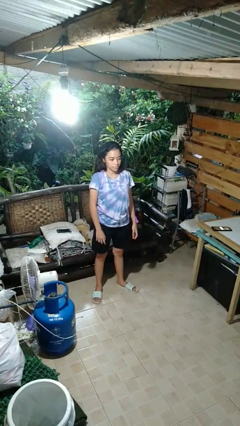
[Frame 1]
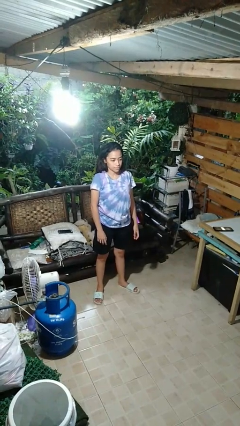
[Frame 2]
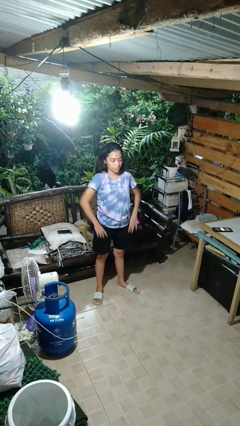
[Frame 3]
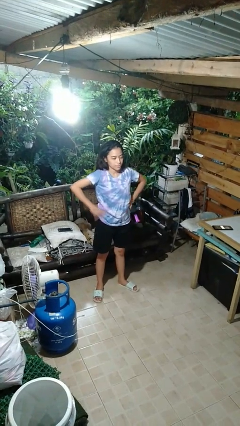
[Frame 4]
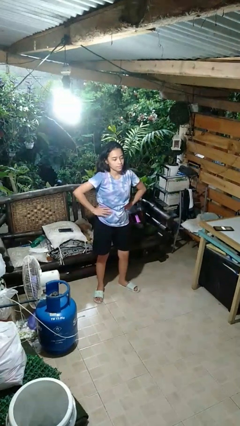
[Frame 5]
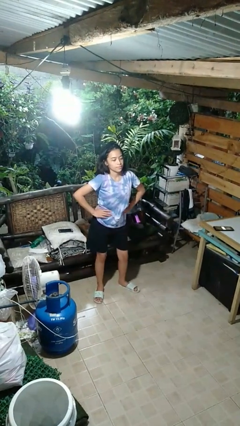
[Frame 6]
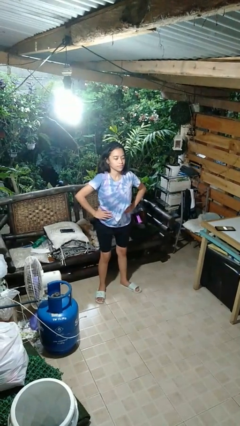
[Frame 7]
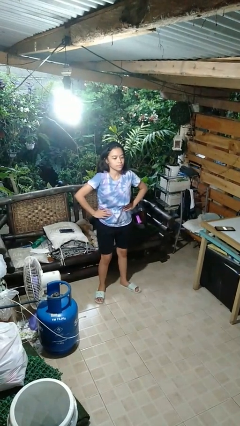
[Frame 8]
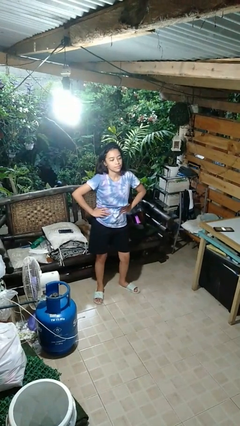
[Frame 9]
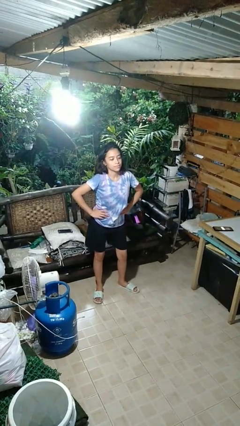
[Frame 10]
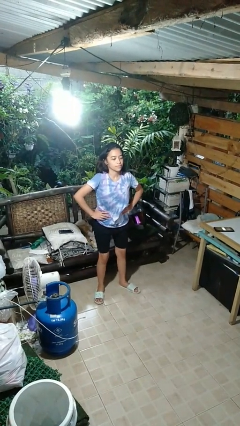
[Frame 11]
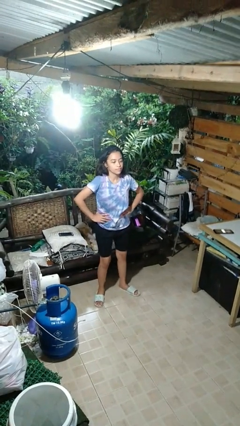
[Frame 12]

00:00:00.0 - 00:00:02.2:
person wiggles hips

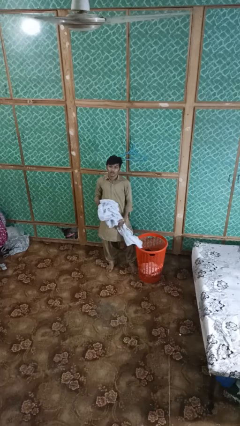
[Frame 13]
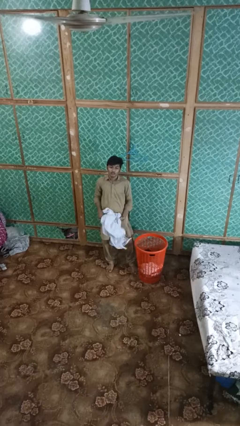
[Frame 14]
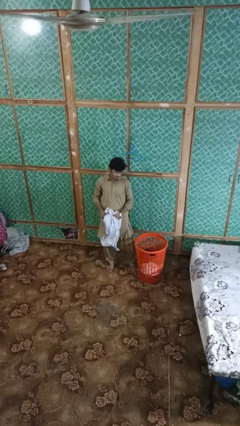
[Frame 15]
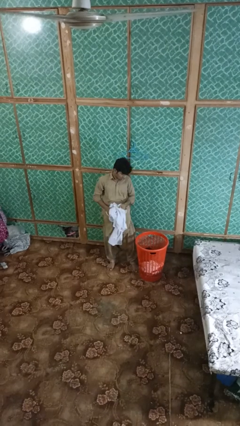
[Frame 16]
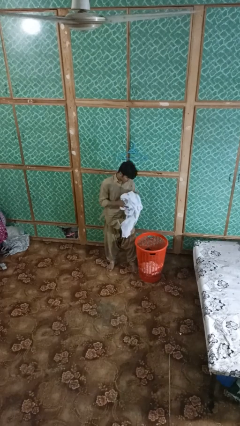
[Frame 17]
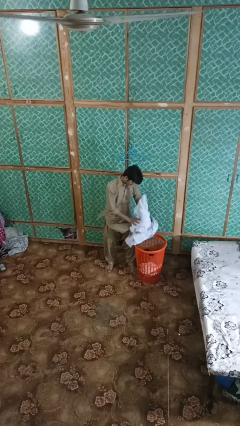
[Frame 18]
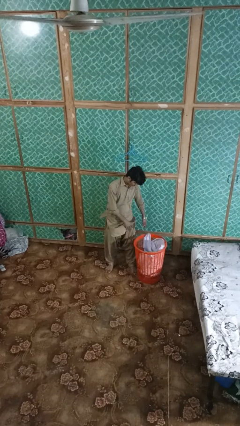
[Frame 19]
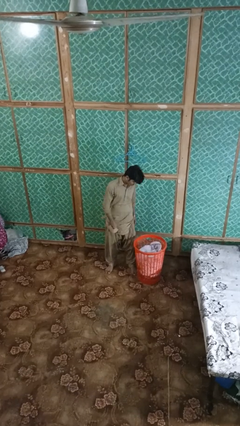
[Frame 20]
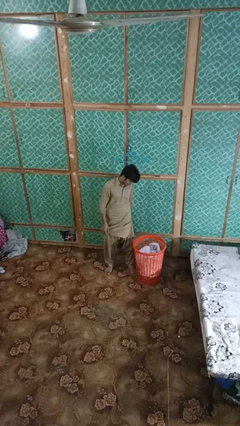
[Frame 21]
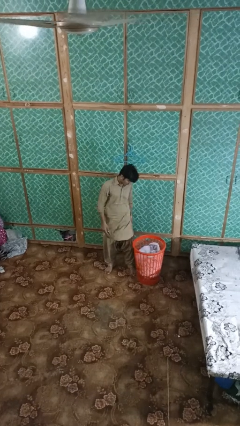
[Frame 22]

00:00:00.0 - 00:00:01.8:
person puts object into basket

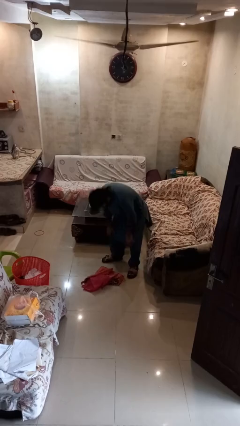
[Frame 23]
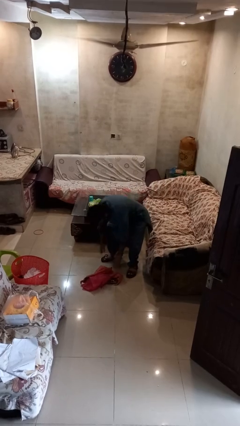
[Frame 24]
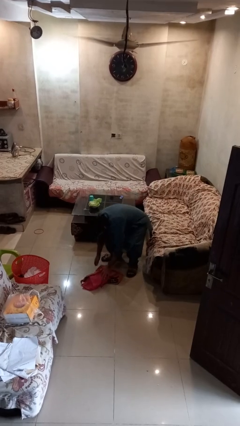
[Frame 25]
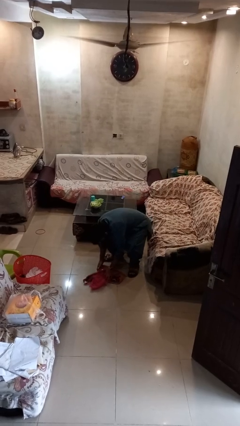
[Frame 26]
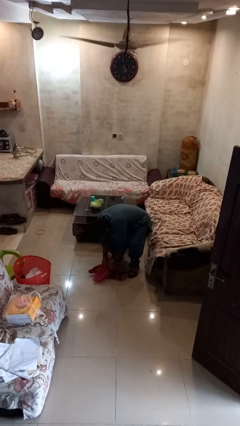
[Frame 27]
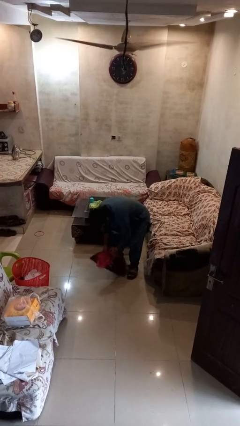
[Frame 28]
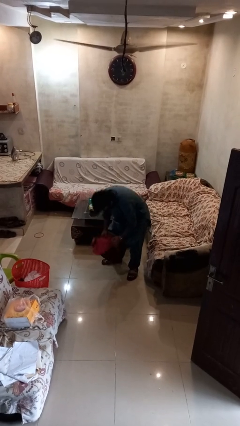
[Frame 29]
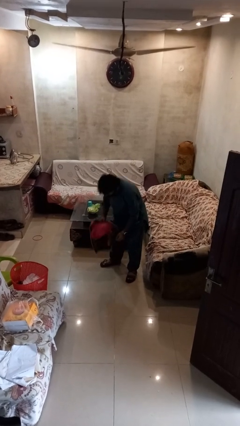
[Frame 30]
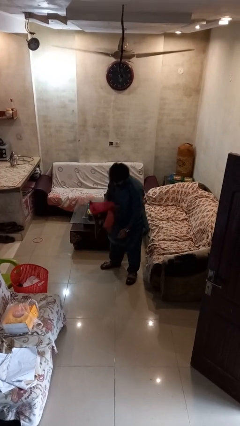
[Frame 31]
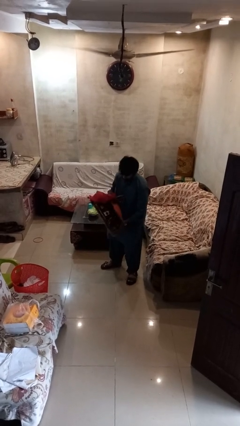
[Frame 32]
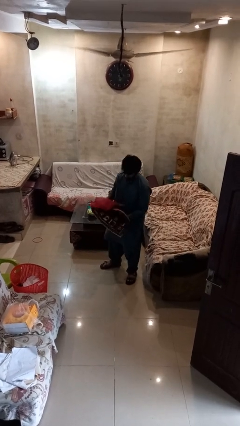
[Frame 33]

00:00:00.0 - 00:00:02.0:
person picks up object from floor

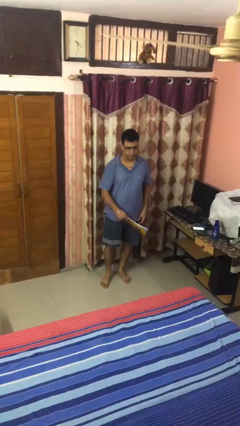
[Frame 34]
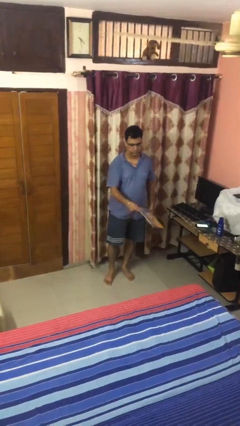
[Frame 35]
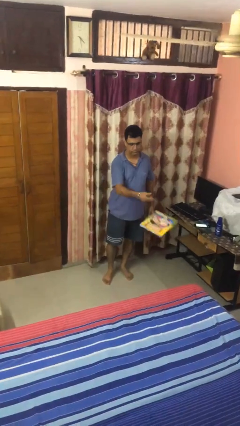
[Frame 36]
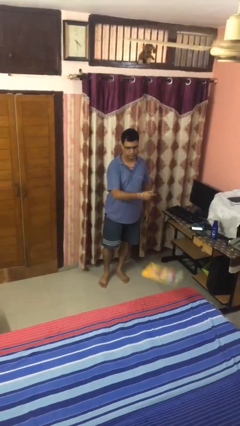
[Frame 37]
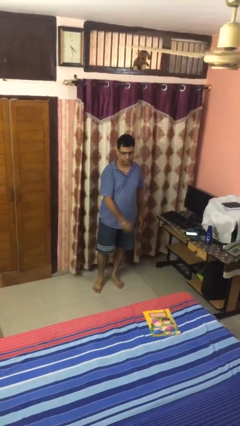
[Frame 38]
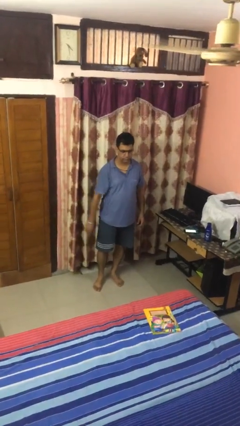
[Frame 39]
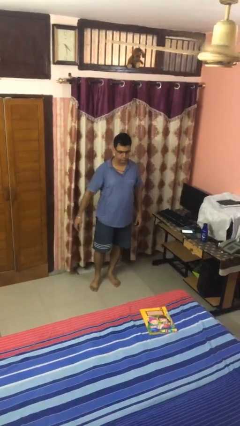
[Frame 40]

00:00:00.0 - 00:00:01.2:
person throws object on bed

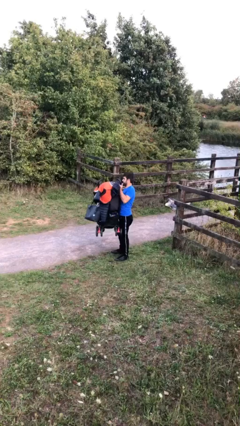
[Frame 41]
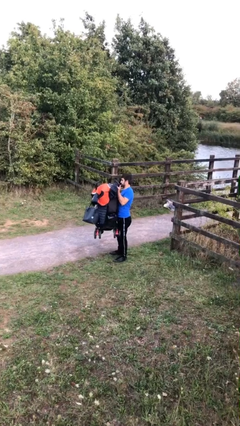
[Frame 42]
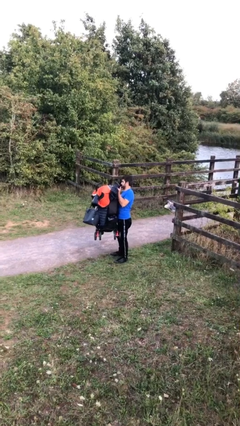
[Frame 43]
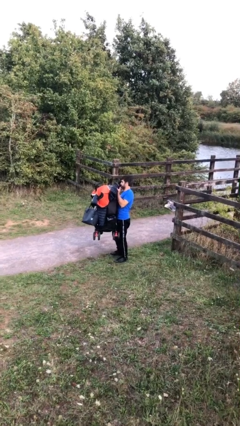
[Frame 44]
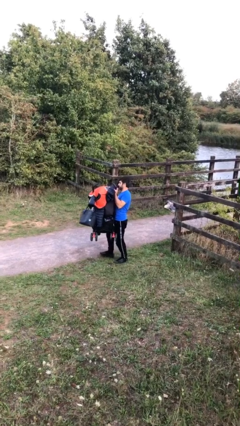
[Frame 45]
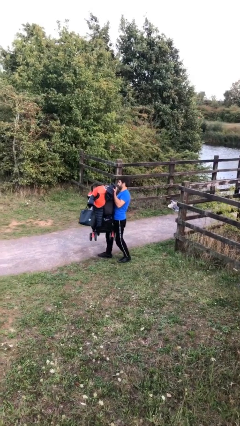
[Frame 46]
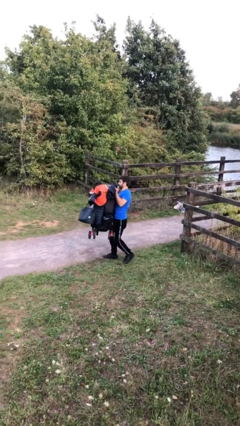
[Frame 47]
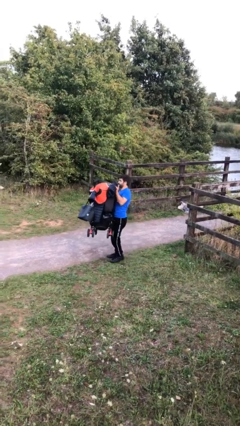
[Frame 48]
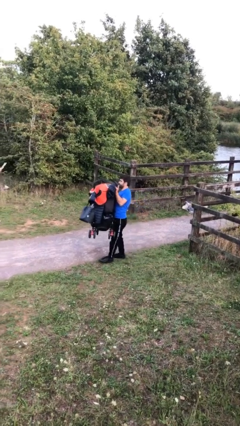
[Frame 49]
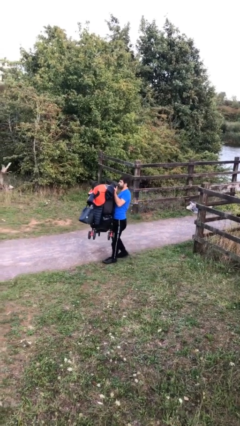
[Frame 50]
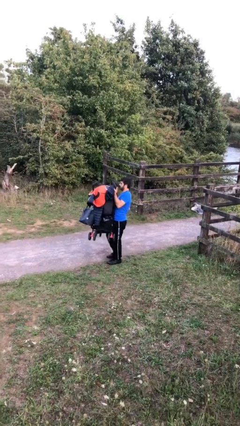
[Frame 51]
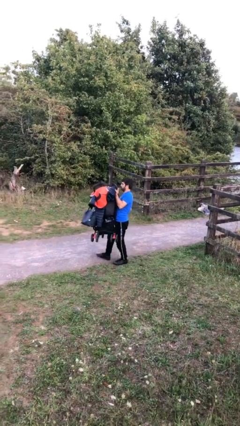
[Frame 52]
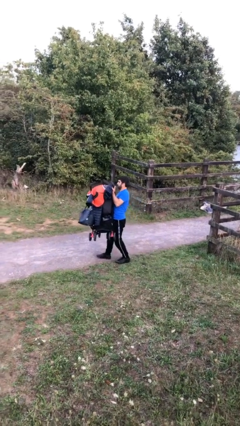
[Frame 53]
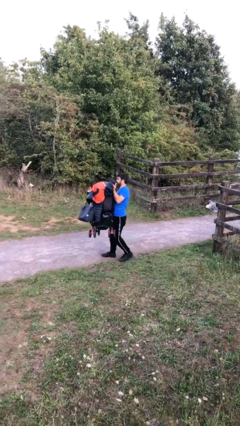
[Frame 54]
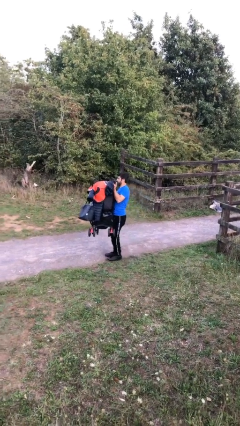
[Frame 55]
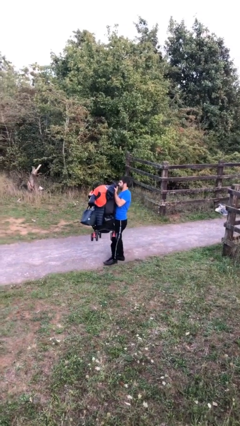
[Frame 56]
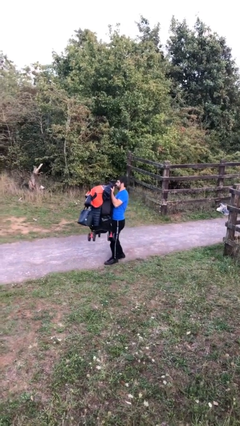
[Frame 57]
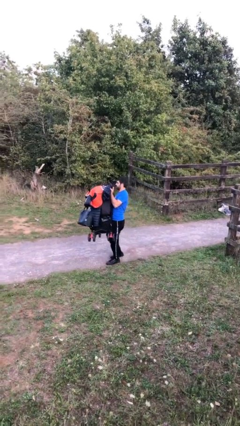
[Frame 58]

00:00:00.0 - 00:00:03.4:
person carries heavy object

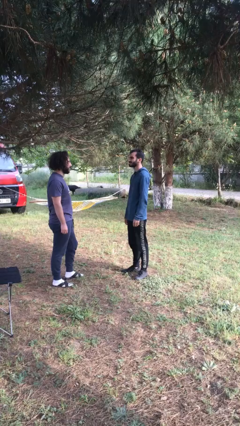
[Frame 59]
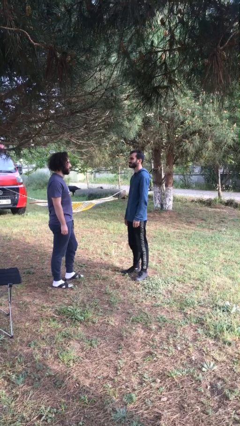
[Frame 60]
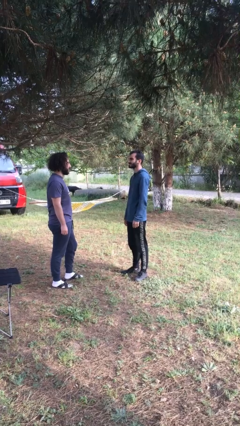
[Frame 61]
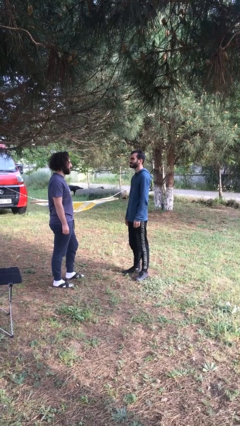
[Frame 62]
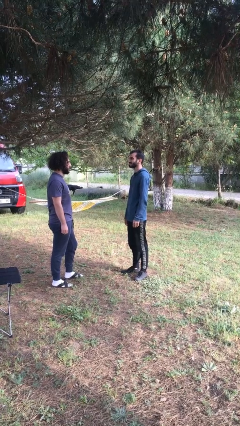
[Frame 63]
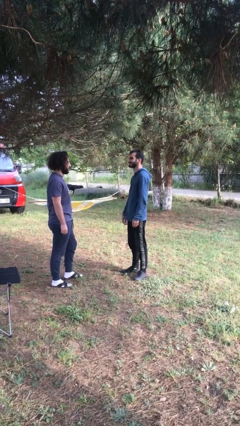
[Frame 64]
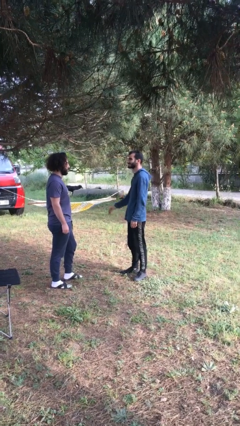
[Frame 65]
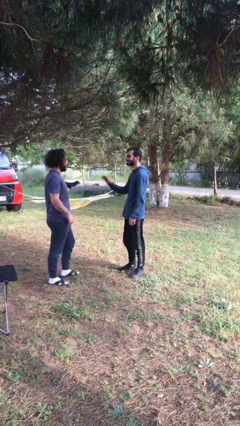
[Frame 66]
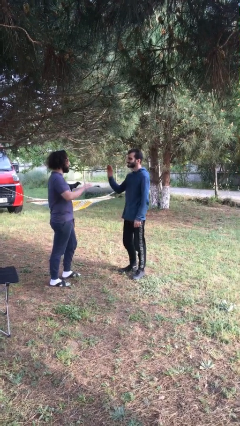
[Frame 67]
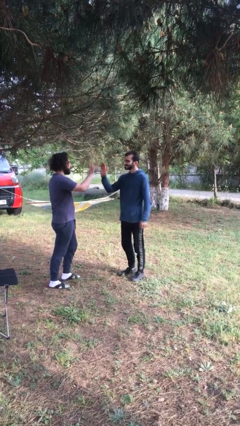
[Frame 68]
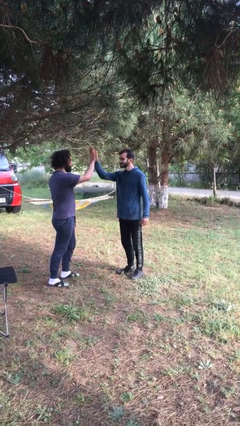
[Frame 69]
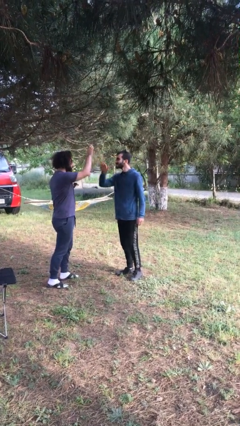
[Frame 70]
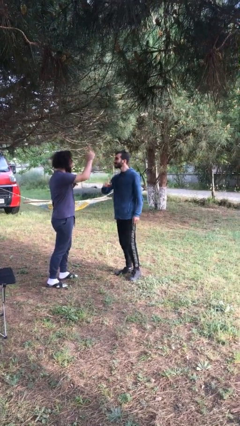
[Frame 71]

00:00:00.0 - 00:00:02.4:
person highfives hand

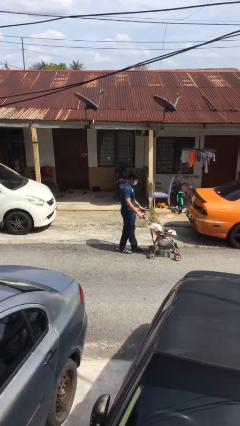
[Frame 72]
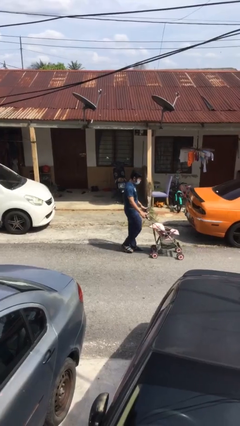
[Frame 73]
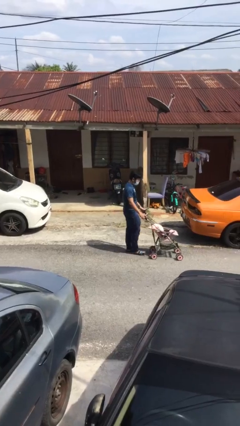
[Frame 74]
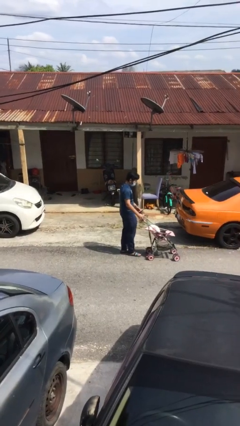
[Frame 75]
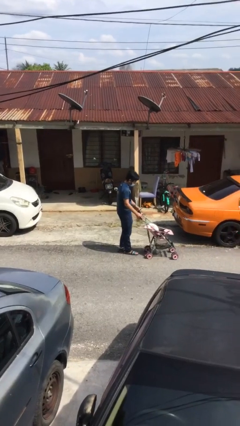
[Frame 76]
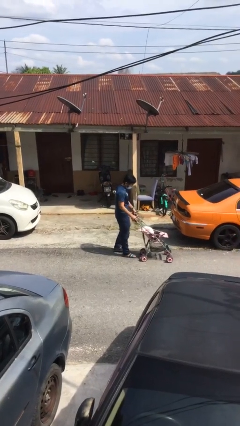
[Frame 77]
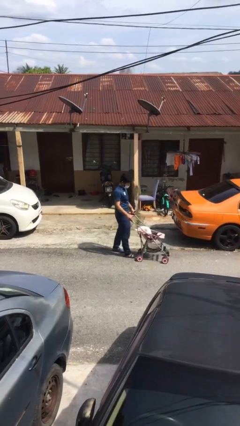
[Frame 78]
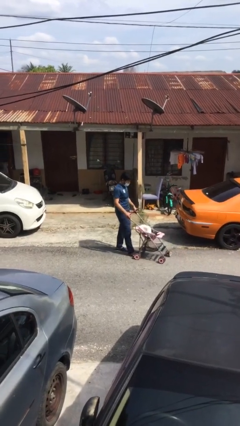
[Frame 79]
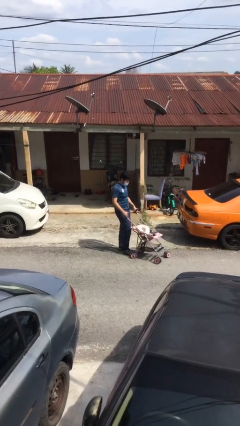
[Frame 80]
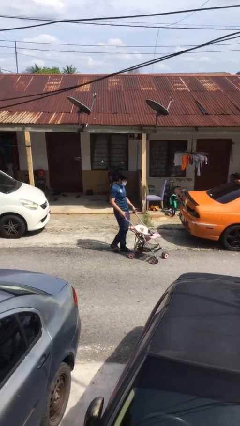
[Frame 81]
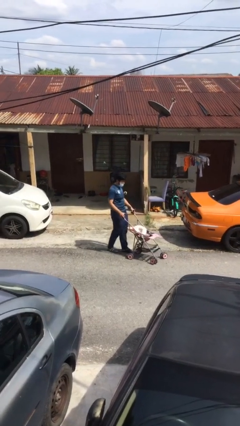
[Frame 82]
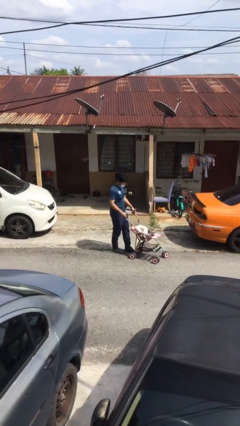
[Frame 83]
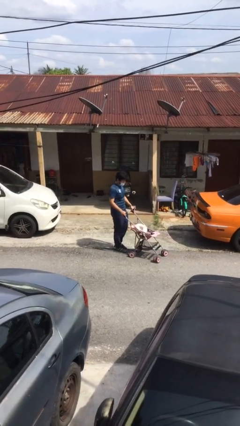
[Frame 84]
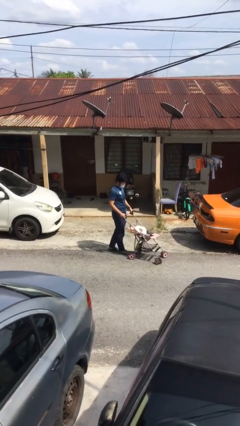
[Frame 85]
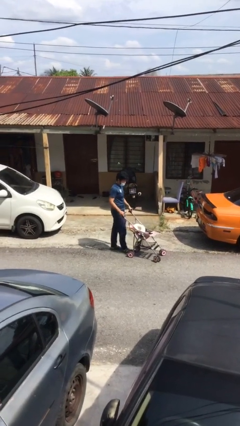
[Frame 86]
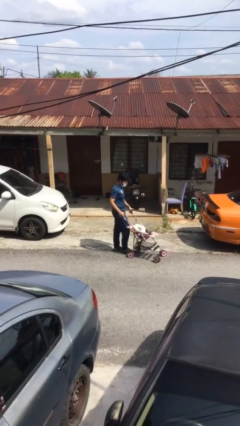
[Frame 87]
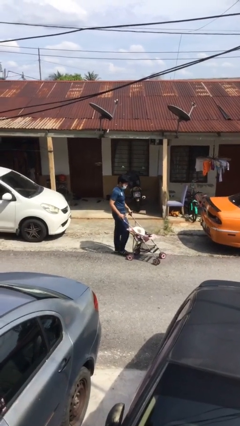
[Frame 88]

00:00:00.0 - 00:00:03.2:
person pulls wheeled cart

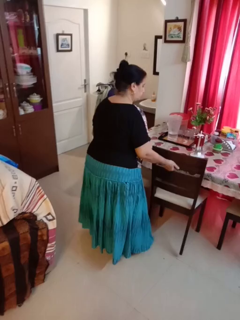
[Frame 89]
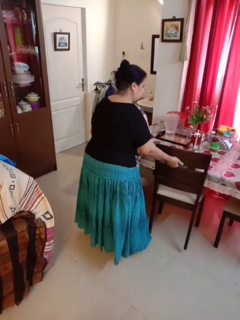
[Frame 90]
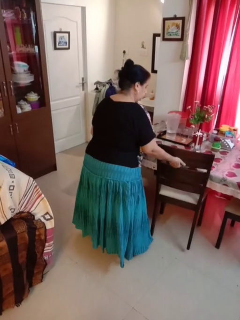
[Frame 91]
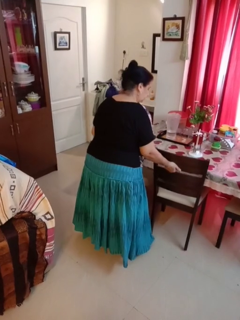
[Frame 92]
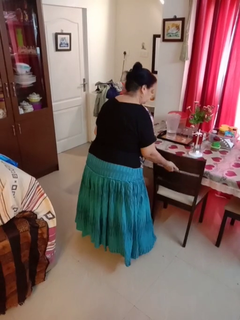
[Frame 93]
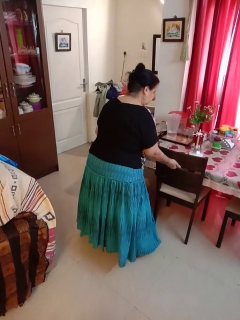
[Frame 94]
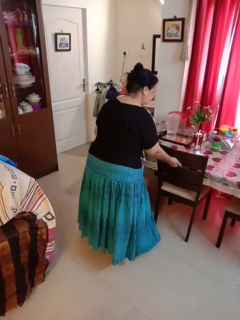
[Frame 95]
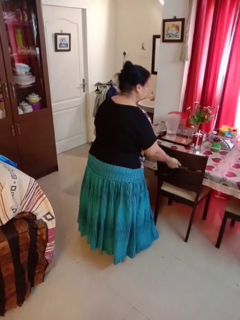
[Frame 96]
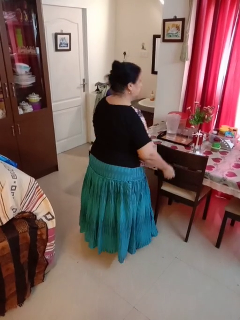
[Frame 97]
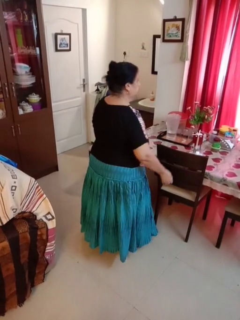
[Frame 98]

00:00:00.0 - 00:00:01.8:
person pushes in chair
